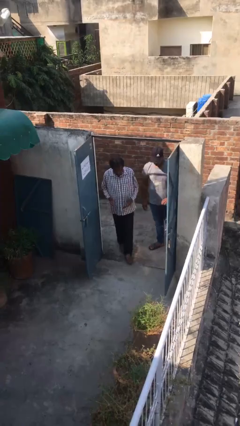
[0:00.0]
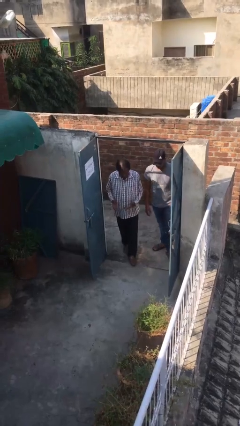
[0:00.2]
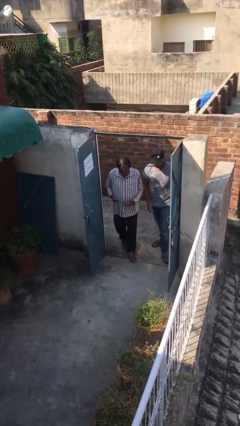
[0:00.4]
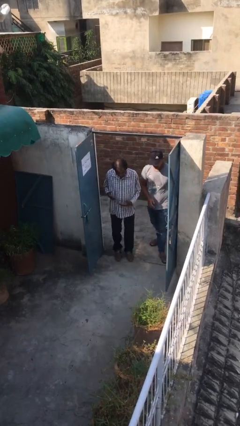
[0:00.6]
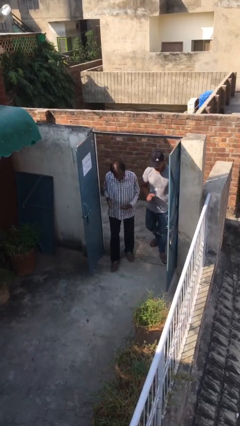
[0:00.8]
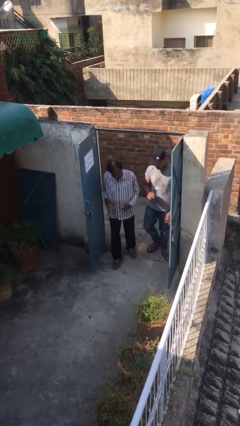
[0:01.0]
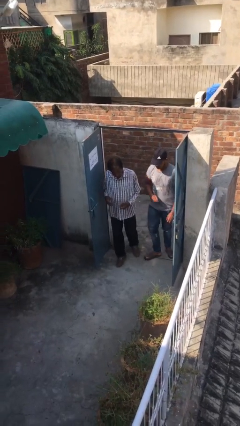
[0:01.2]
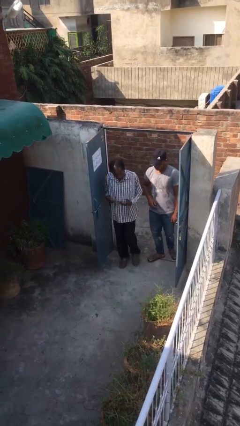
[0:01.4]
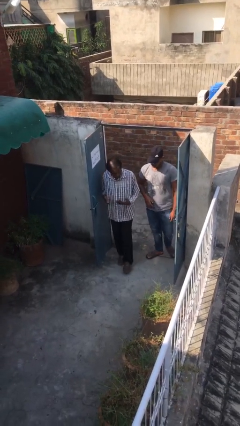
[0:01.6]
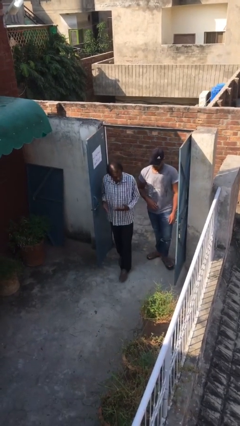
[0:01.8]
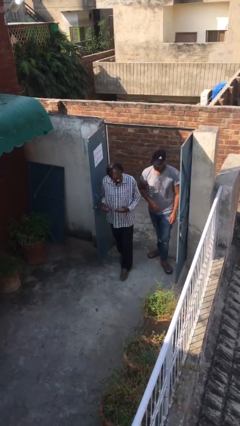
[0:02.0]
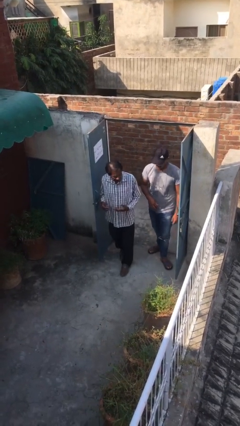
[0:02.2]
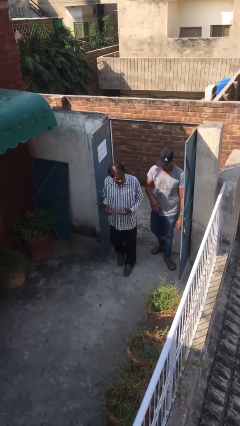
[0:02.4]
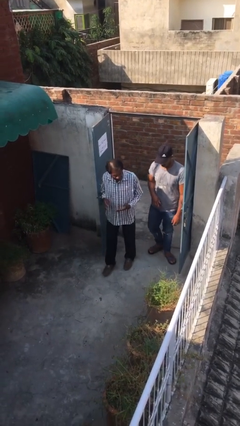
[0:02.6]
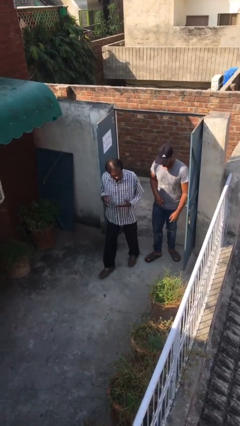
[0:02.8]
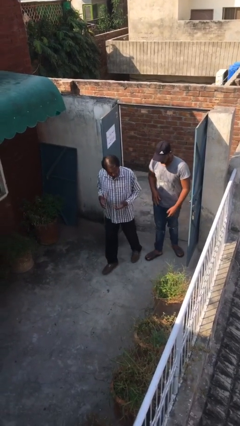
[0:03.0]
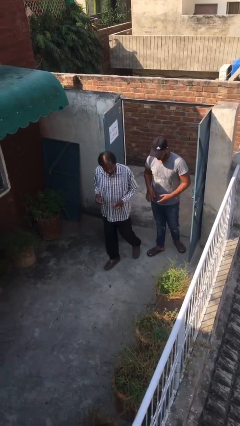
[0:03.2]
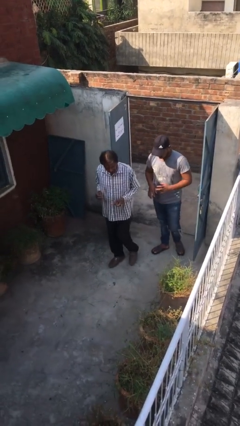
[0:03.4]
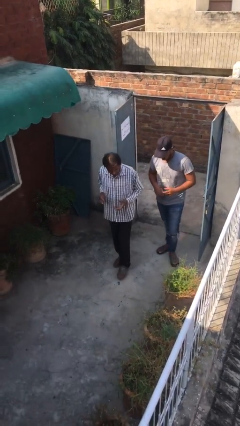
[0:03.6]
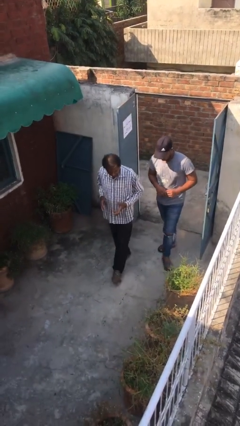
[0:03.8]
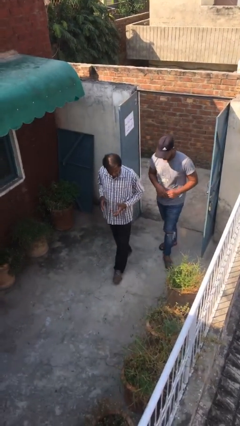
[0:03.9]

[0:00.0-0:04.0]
person talks to person

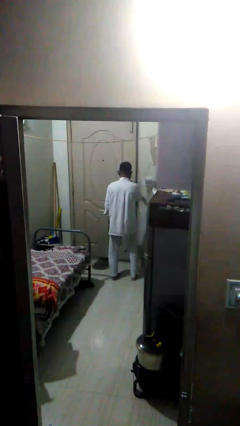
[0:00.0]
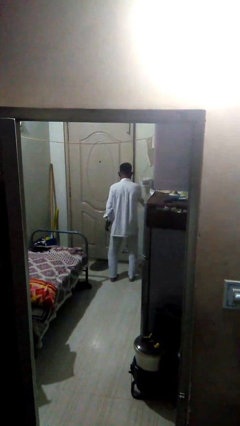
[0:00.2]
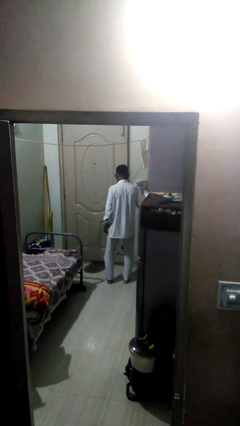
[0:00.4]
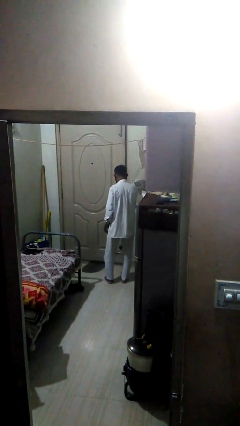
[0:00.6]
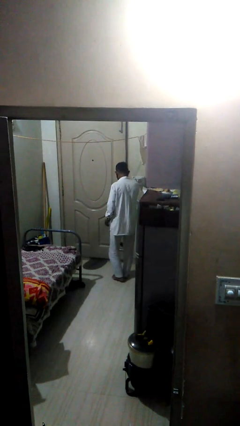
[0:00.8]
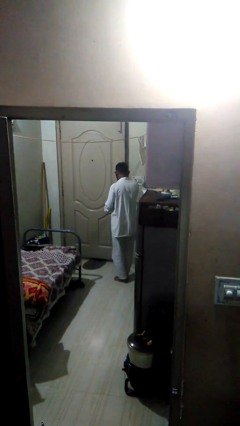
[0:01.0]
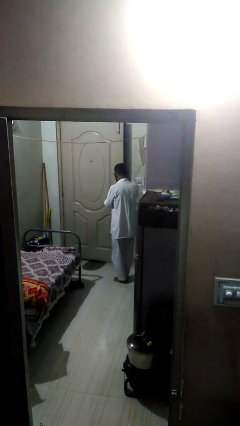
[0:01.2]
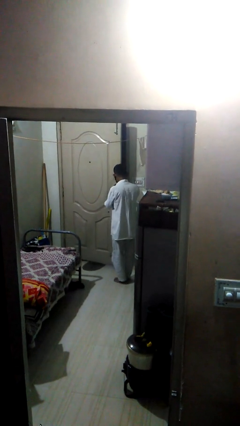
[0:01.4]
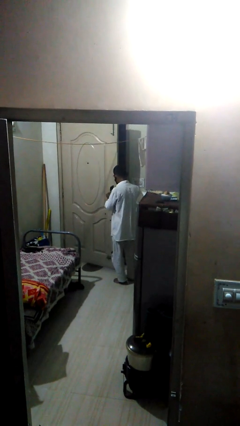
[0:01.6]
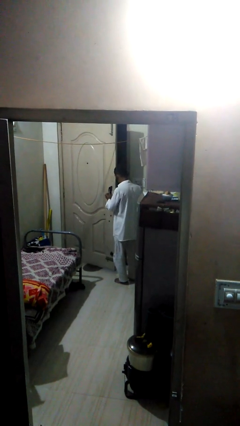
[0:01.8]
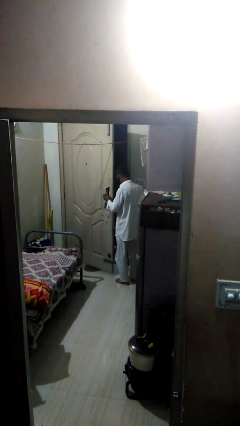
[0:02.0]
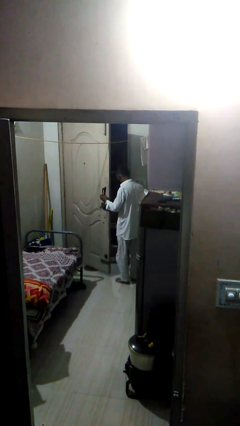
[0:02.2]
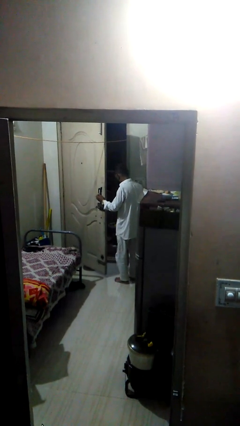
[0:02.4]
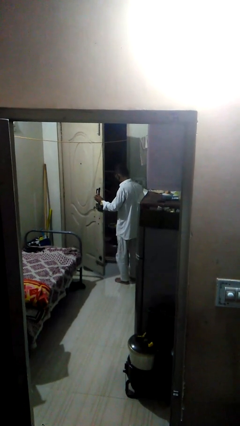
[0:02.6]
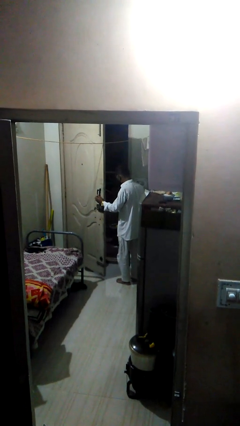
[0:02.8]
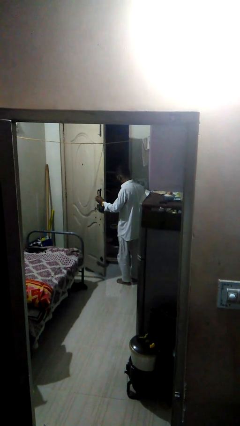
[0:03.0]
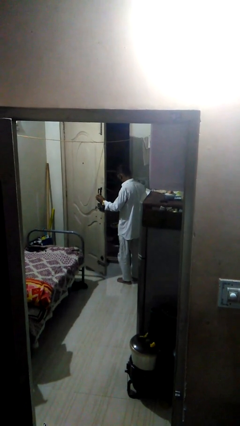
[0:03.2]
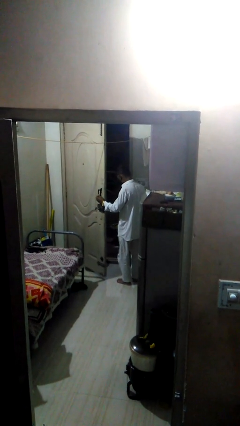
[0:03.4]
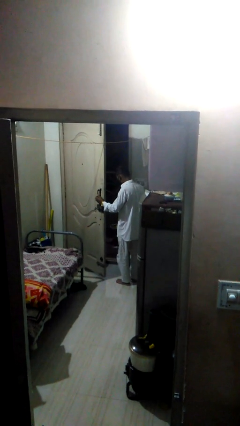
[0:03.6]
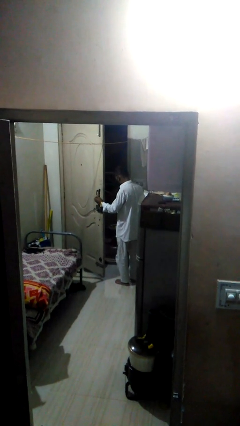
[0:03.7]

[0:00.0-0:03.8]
person opens facility door

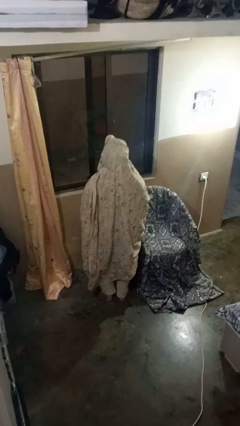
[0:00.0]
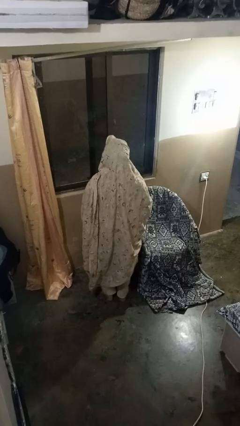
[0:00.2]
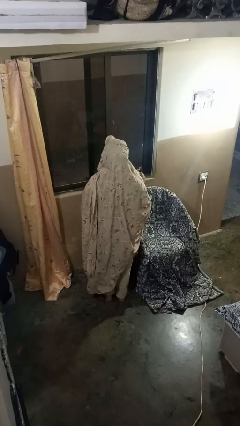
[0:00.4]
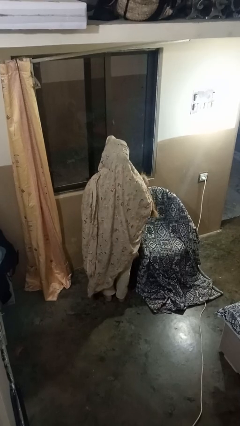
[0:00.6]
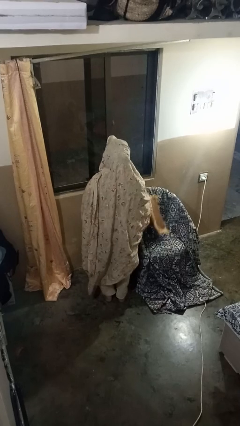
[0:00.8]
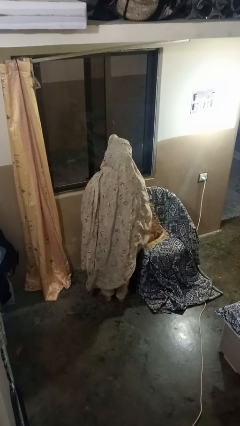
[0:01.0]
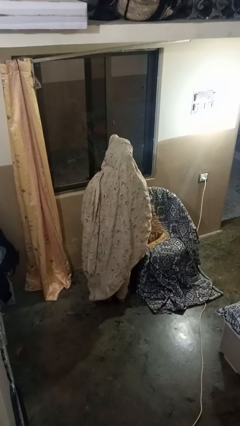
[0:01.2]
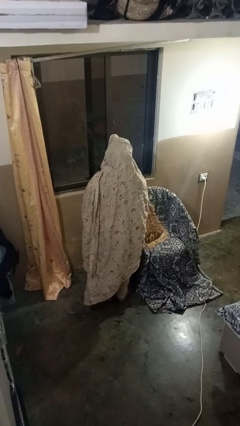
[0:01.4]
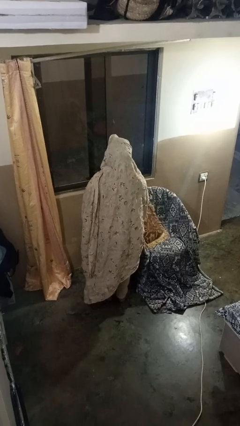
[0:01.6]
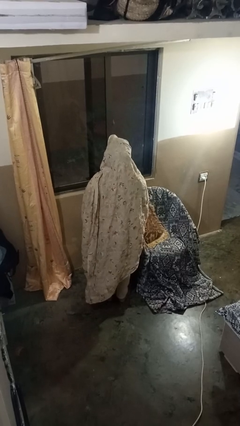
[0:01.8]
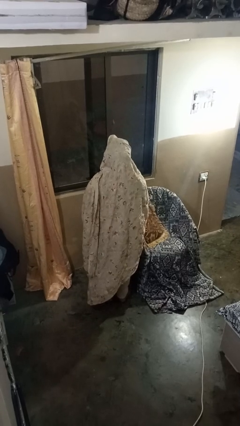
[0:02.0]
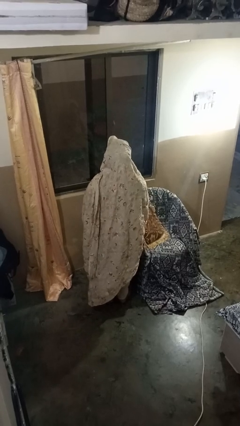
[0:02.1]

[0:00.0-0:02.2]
person puts down object on couch

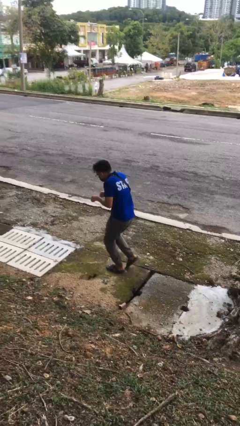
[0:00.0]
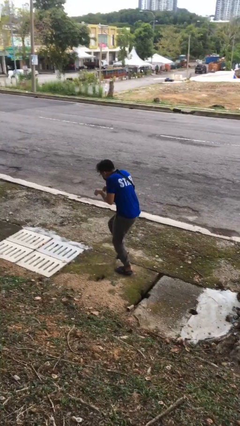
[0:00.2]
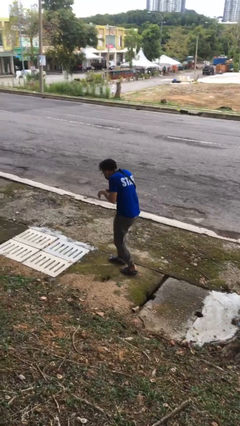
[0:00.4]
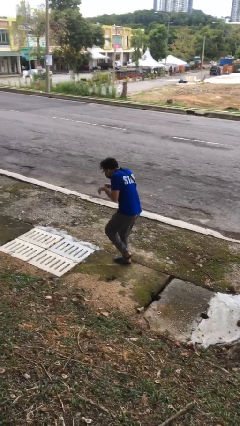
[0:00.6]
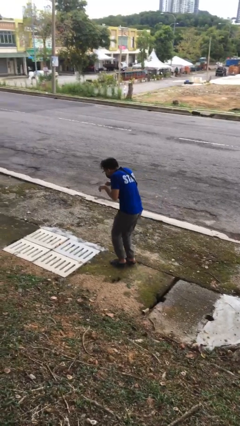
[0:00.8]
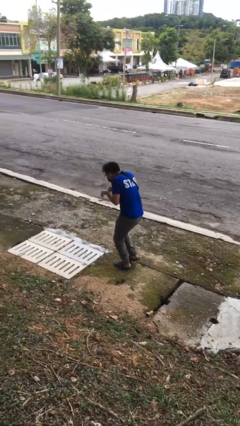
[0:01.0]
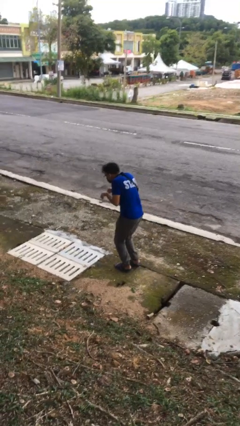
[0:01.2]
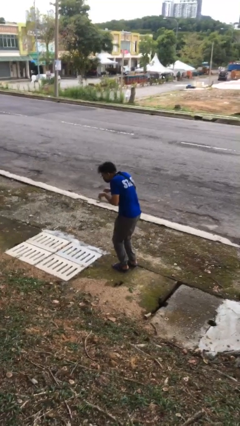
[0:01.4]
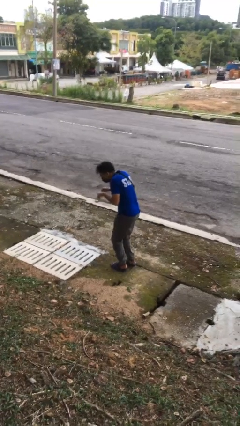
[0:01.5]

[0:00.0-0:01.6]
person walks tiptoe

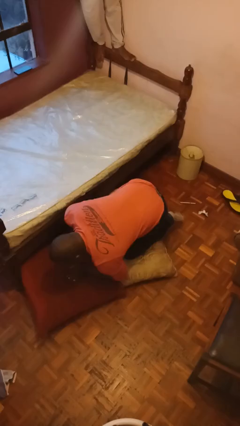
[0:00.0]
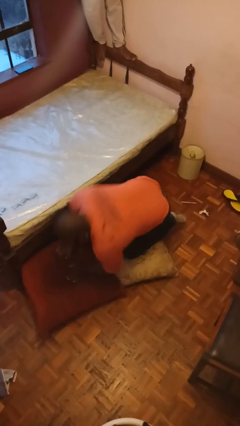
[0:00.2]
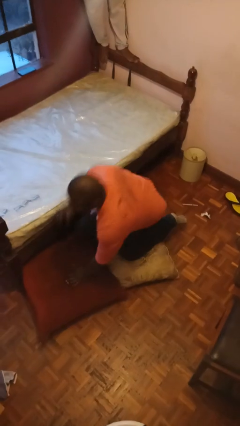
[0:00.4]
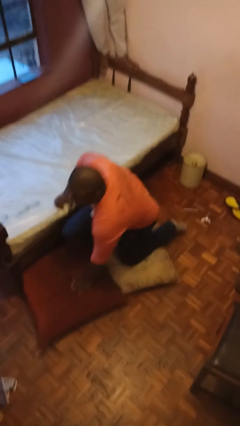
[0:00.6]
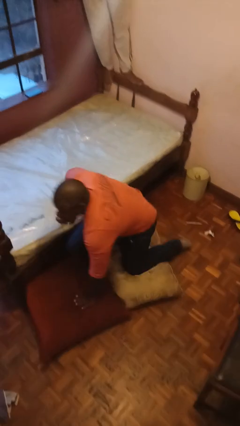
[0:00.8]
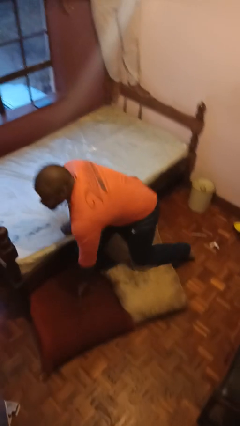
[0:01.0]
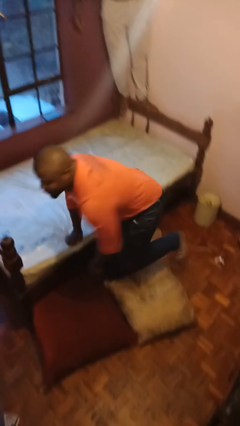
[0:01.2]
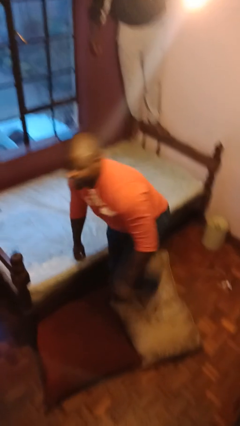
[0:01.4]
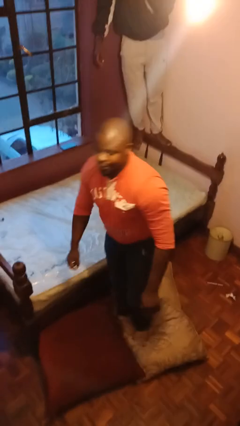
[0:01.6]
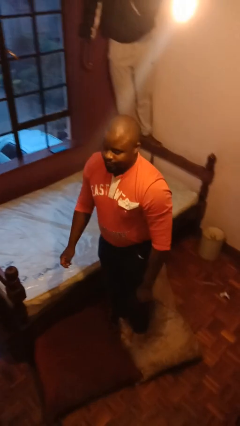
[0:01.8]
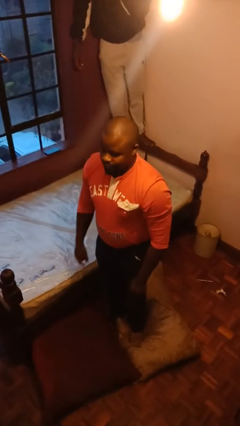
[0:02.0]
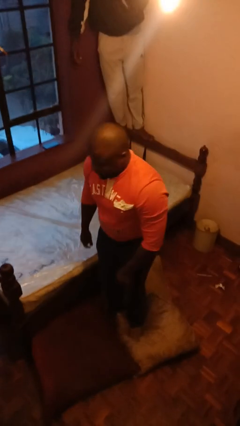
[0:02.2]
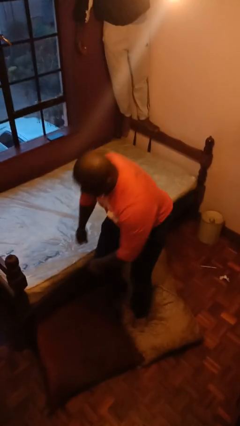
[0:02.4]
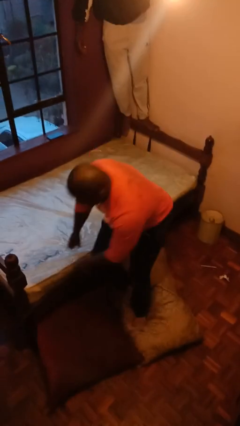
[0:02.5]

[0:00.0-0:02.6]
person stands up from floor

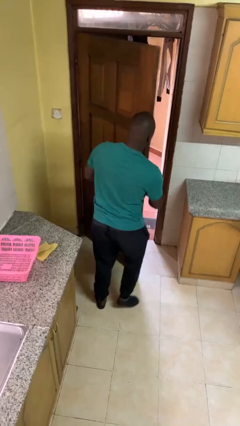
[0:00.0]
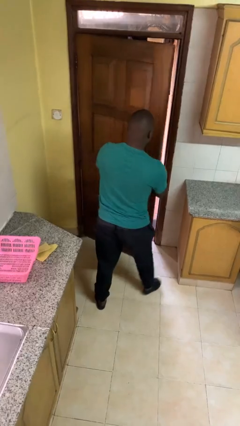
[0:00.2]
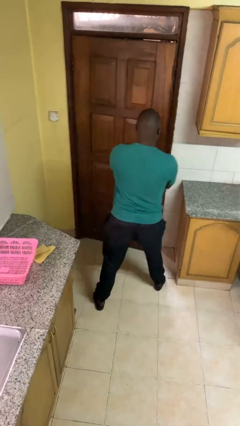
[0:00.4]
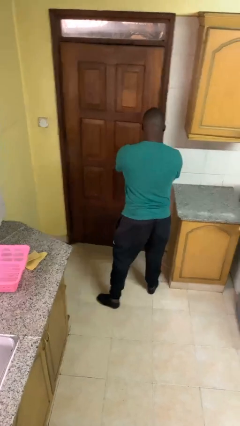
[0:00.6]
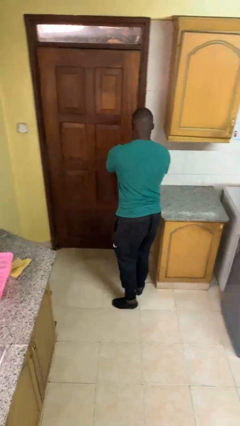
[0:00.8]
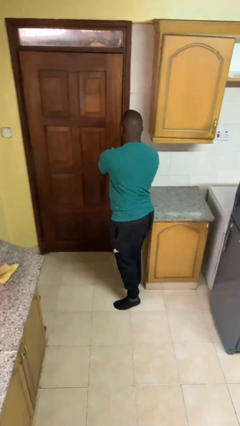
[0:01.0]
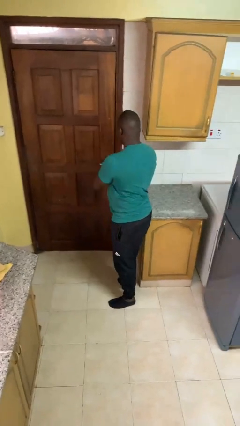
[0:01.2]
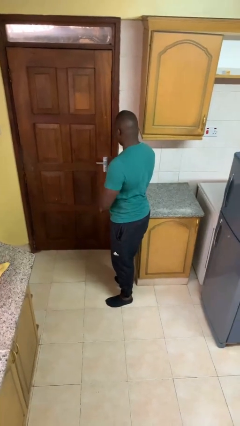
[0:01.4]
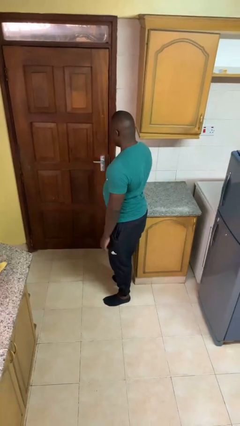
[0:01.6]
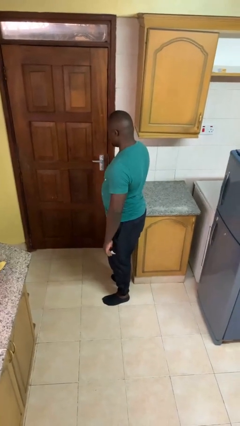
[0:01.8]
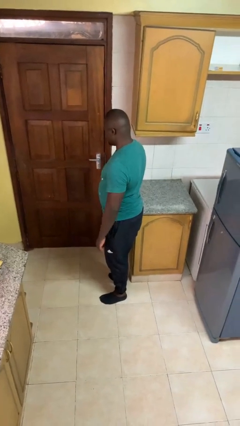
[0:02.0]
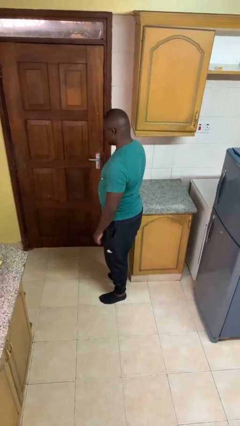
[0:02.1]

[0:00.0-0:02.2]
person closes facility door

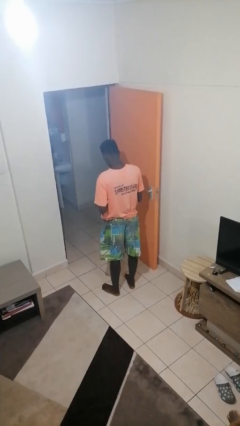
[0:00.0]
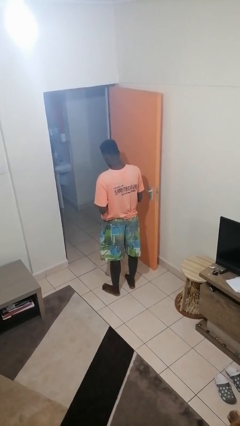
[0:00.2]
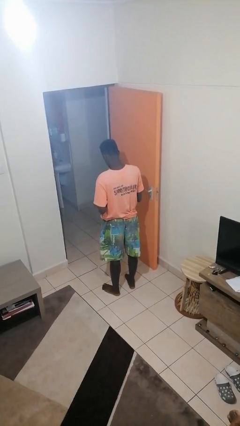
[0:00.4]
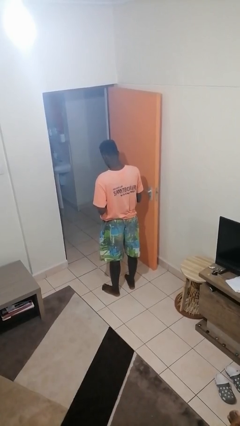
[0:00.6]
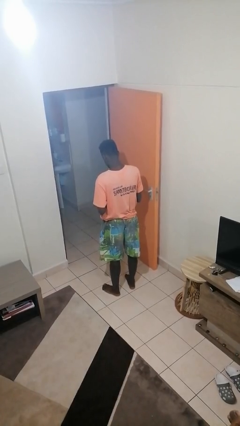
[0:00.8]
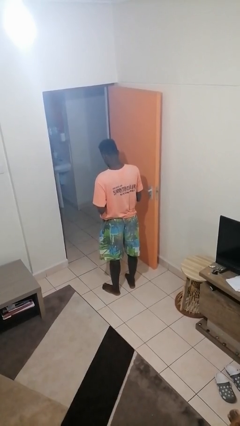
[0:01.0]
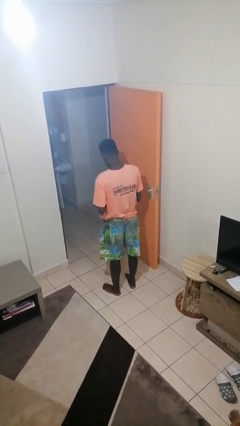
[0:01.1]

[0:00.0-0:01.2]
person takes phone from pocket
